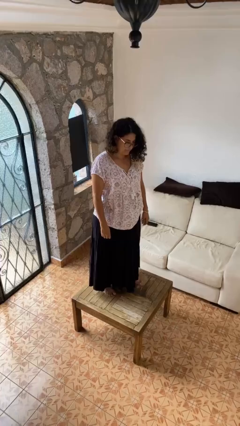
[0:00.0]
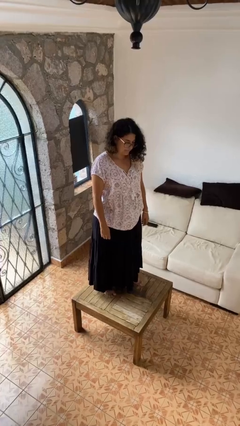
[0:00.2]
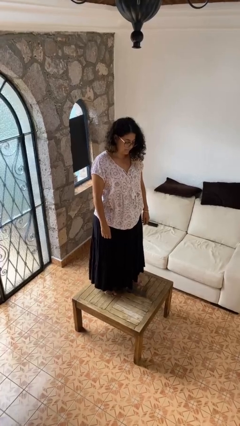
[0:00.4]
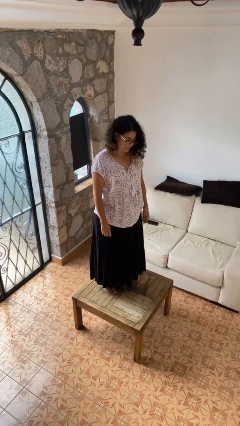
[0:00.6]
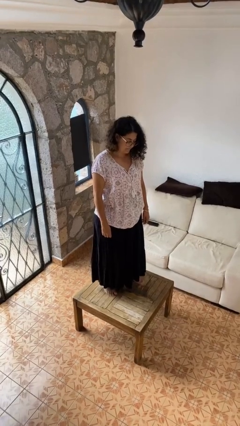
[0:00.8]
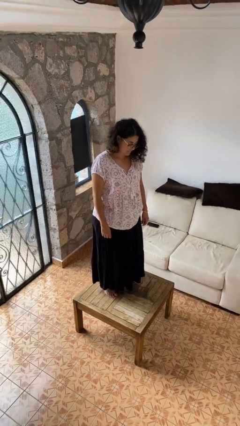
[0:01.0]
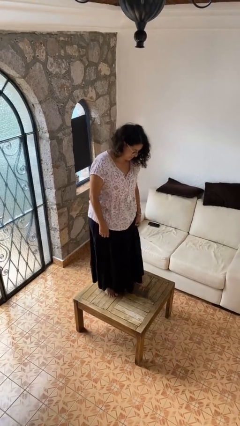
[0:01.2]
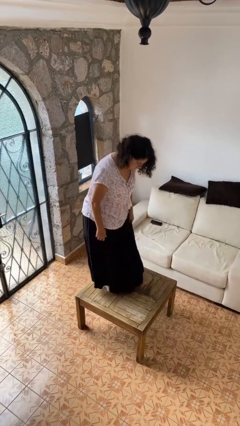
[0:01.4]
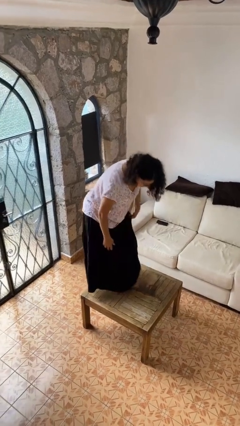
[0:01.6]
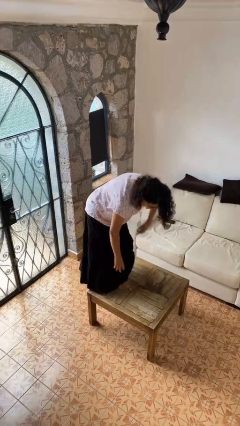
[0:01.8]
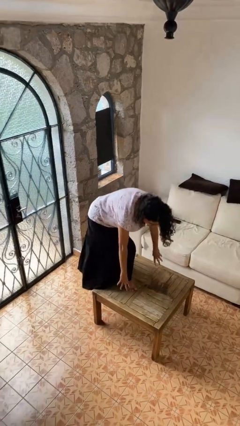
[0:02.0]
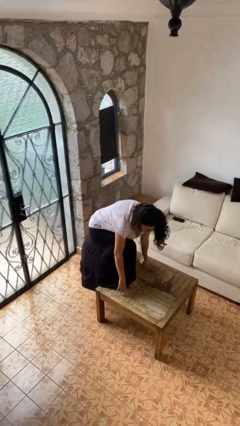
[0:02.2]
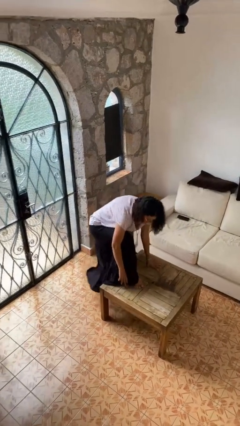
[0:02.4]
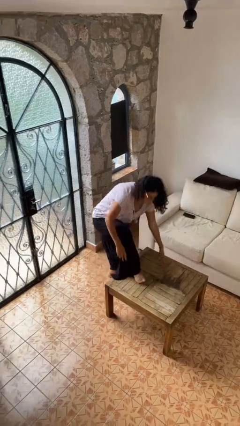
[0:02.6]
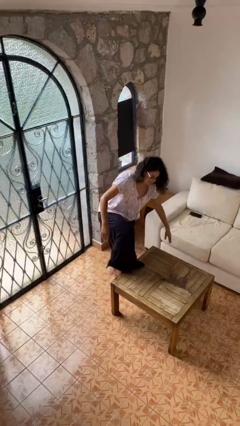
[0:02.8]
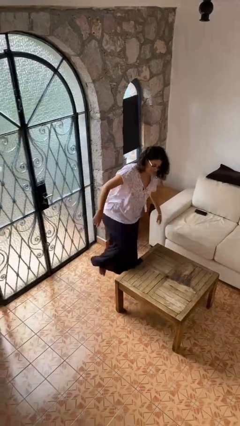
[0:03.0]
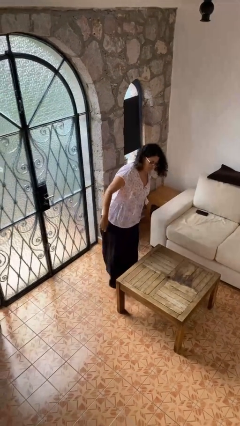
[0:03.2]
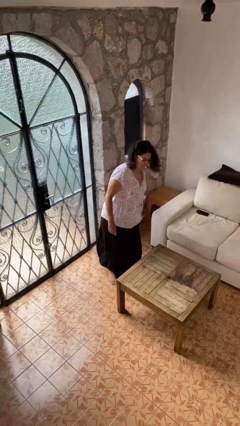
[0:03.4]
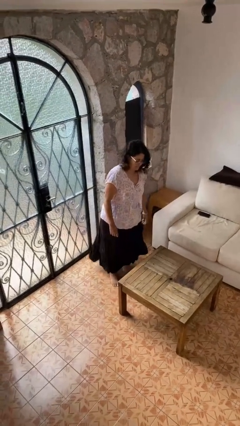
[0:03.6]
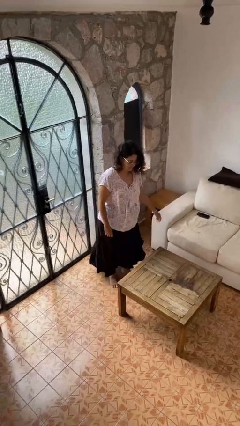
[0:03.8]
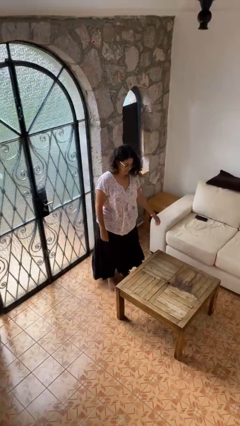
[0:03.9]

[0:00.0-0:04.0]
person climbs off table

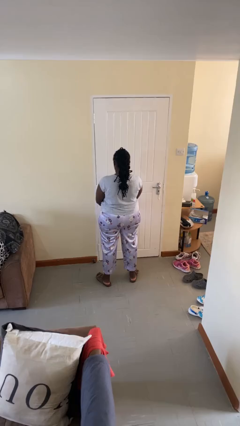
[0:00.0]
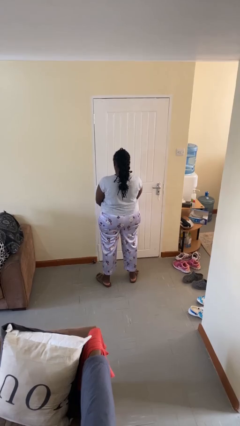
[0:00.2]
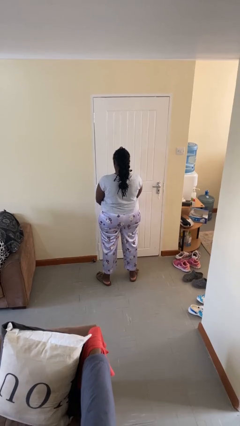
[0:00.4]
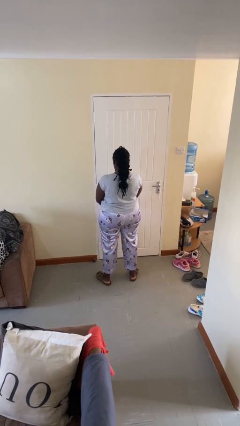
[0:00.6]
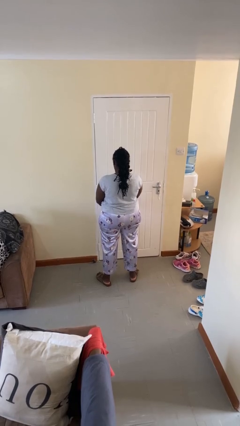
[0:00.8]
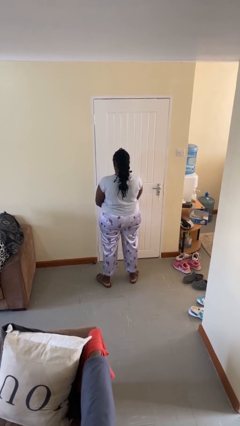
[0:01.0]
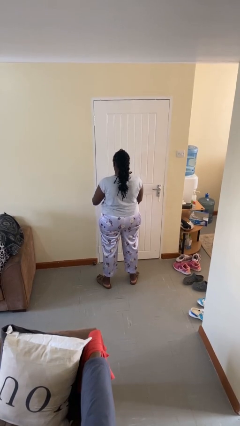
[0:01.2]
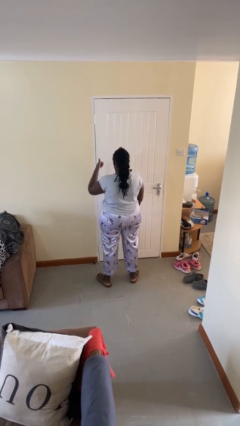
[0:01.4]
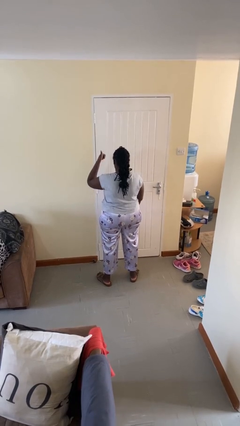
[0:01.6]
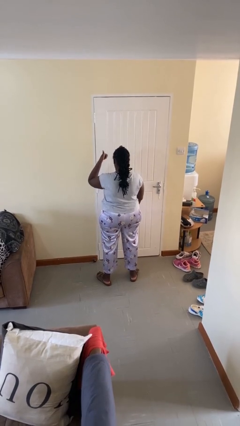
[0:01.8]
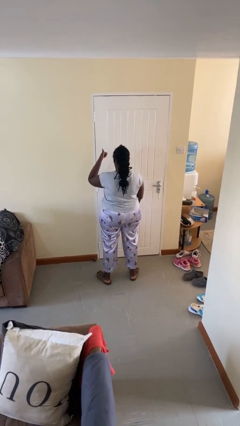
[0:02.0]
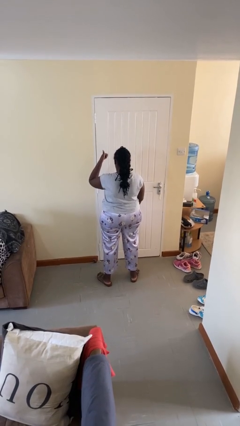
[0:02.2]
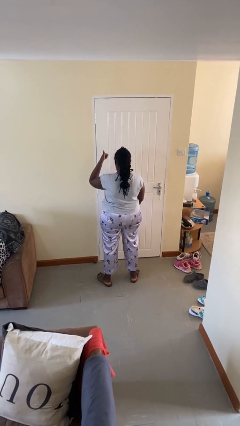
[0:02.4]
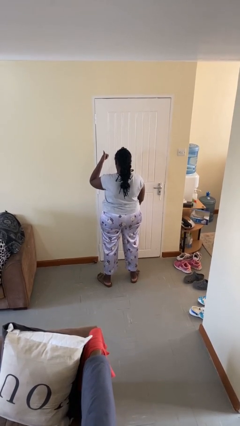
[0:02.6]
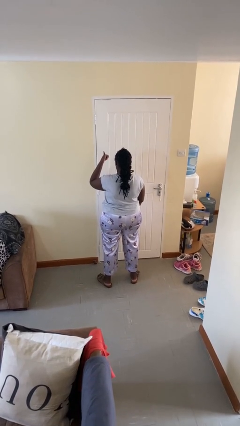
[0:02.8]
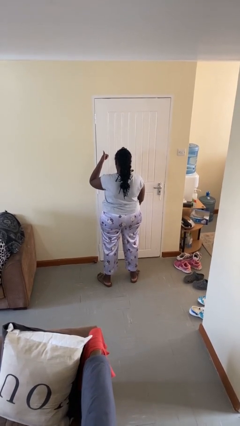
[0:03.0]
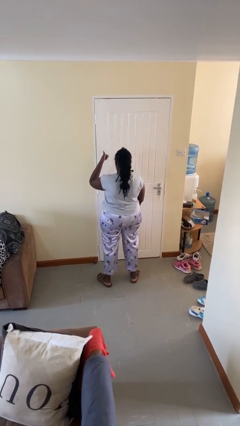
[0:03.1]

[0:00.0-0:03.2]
person gestures thumbs up

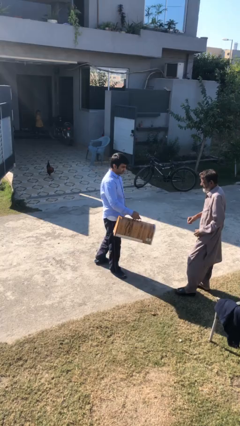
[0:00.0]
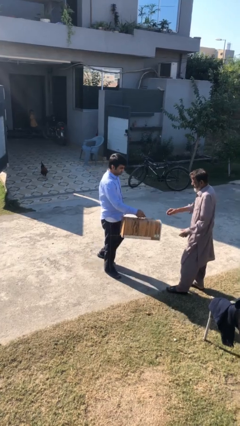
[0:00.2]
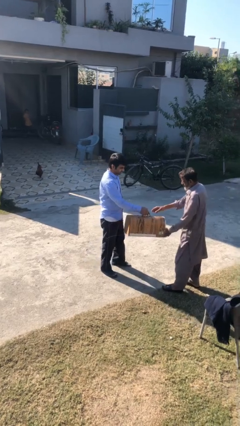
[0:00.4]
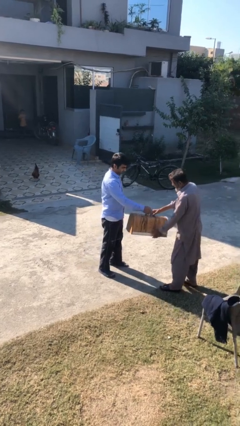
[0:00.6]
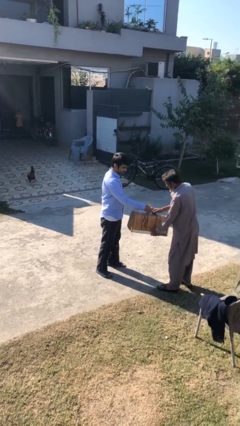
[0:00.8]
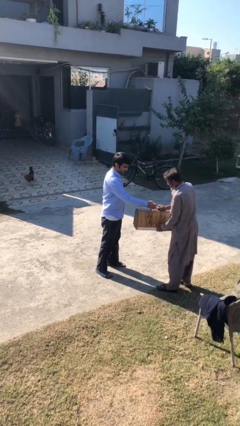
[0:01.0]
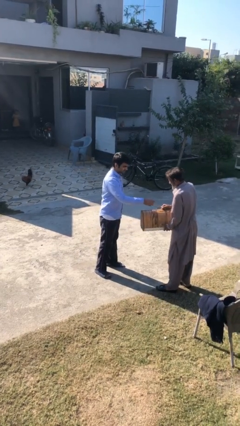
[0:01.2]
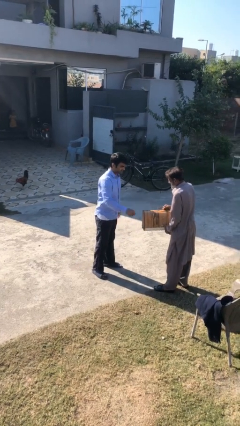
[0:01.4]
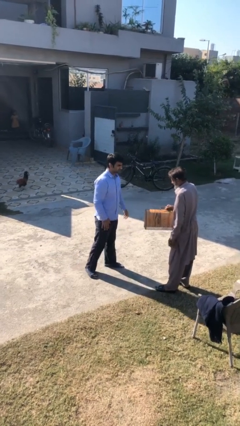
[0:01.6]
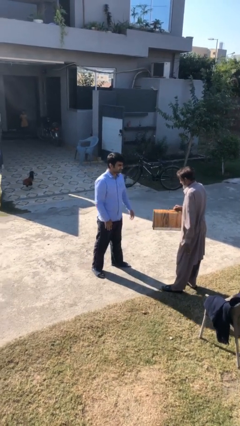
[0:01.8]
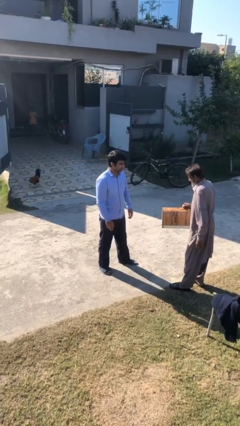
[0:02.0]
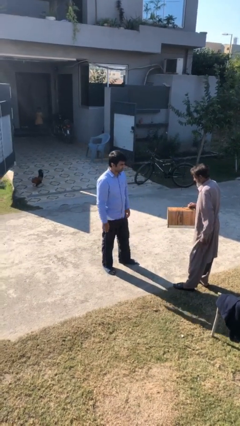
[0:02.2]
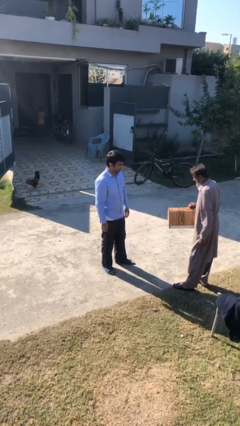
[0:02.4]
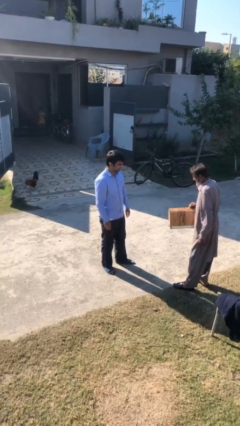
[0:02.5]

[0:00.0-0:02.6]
person transfers object to person

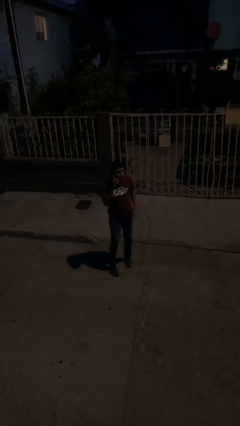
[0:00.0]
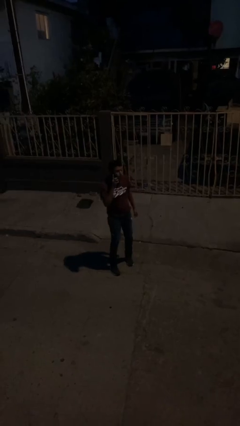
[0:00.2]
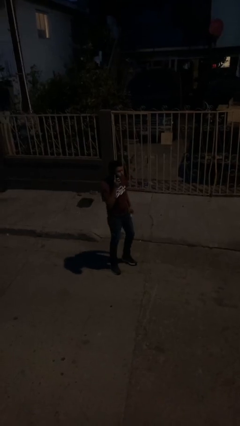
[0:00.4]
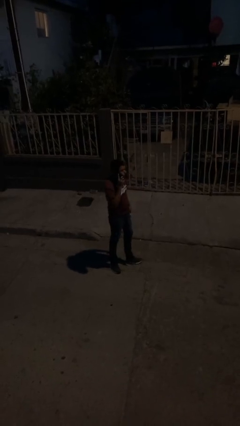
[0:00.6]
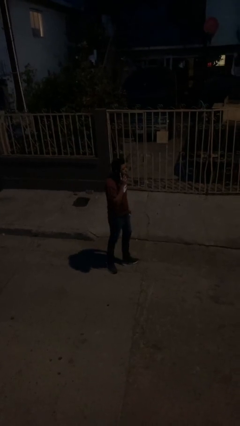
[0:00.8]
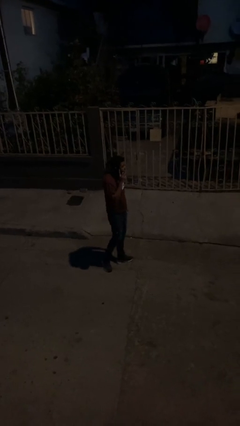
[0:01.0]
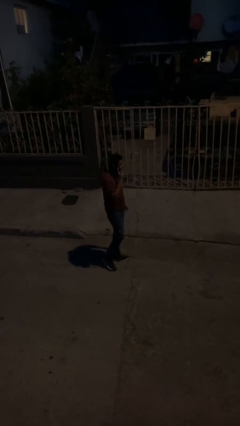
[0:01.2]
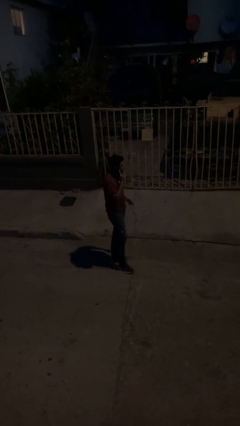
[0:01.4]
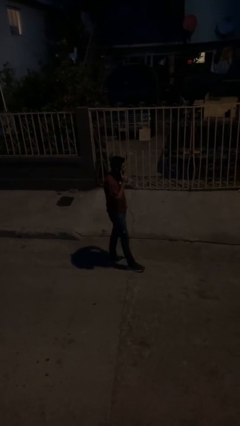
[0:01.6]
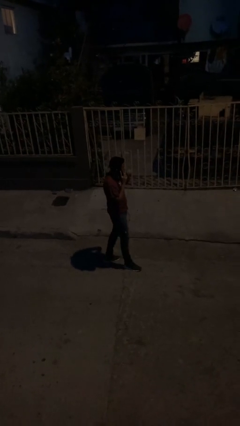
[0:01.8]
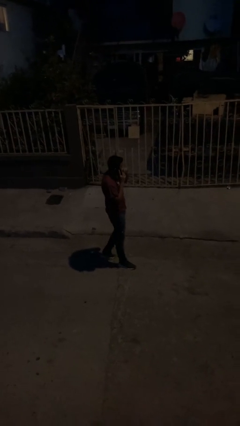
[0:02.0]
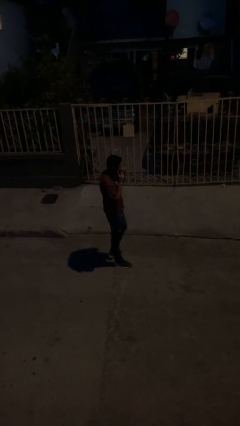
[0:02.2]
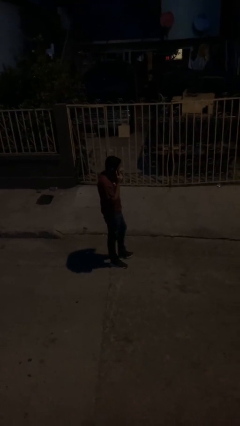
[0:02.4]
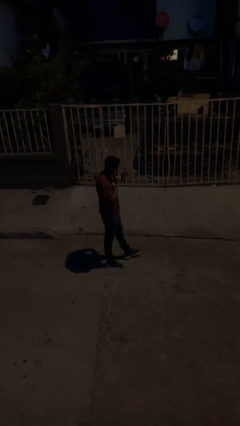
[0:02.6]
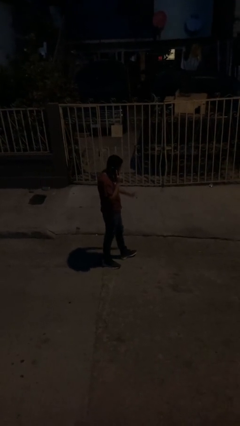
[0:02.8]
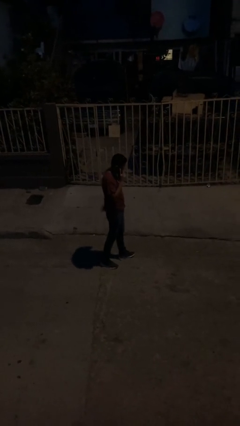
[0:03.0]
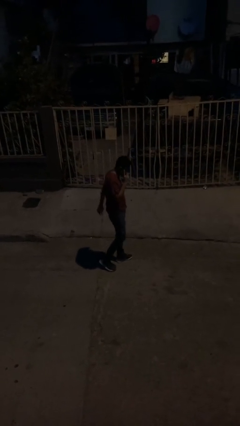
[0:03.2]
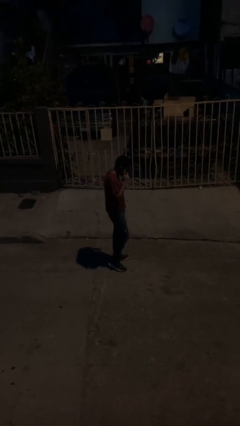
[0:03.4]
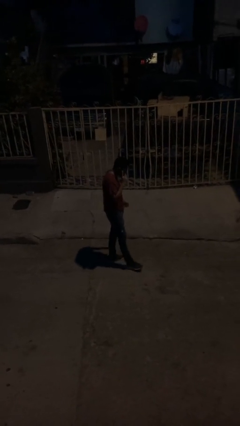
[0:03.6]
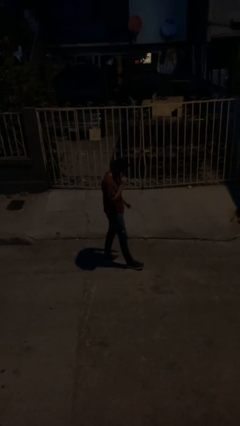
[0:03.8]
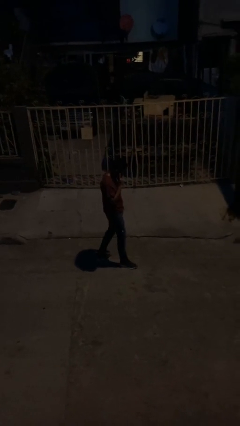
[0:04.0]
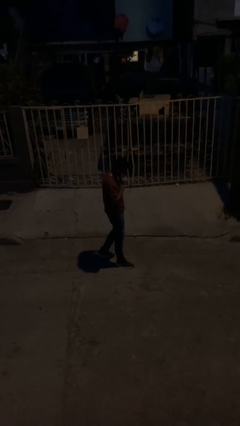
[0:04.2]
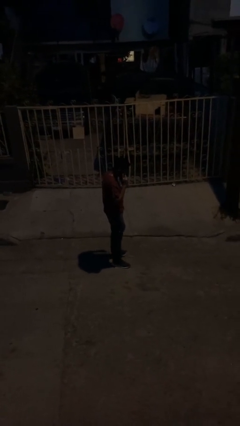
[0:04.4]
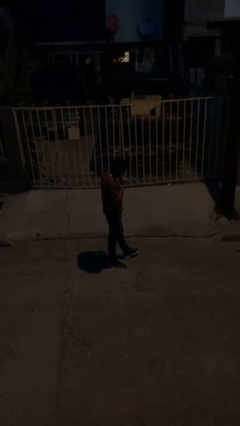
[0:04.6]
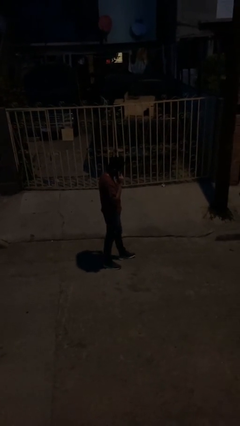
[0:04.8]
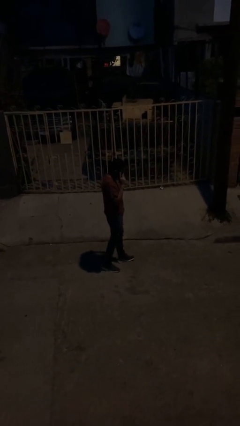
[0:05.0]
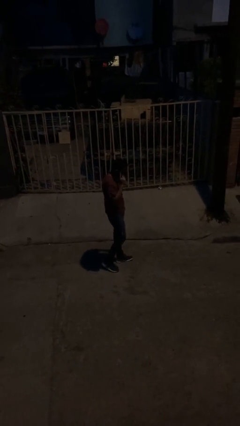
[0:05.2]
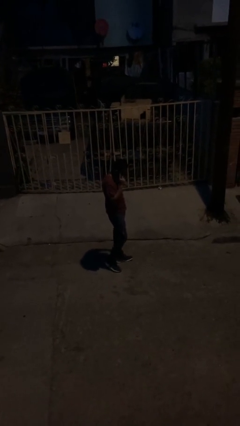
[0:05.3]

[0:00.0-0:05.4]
person talks on phone

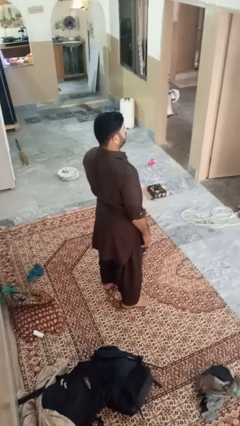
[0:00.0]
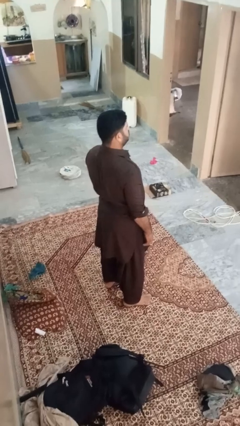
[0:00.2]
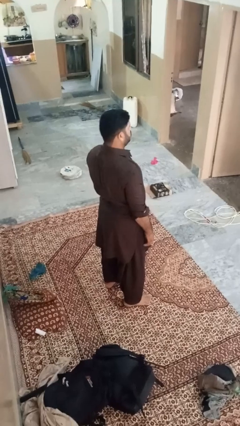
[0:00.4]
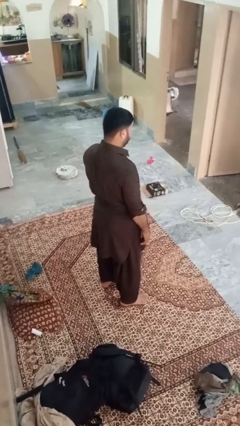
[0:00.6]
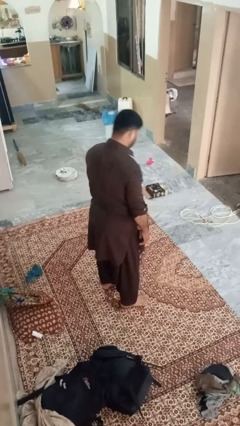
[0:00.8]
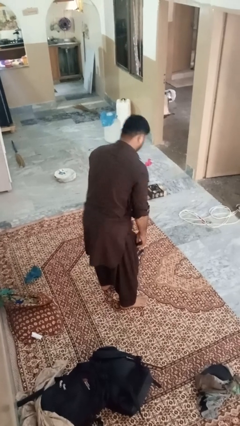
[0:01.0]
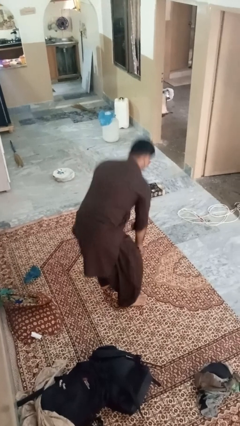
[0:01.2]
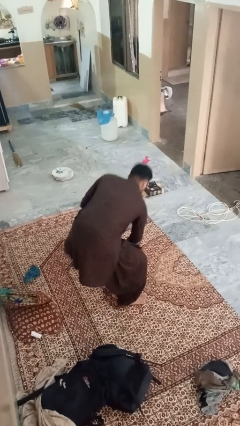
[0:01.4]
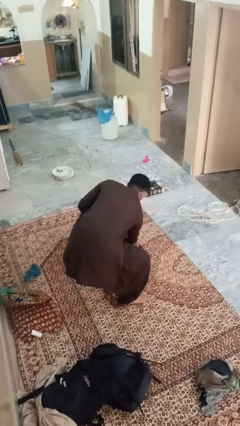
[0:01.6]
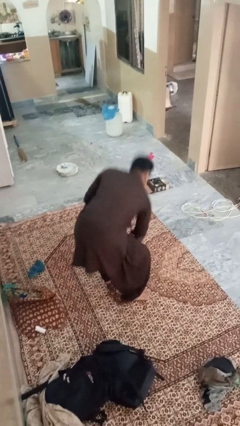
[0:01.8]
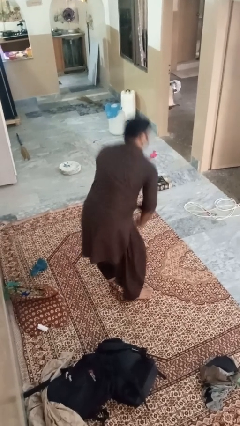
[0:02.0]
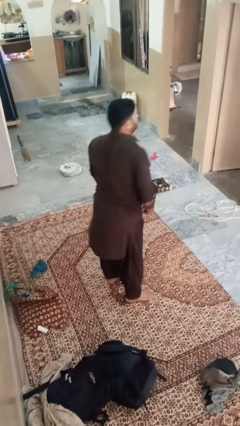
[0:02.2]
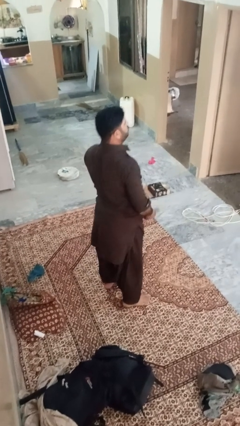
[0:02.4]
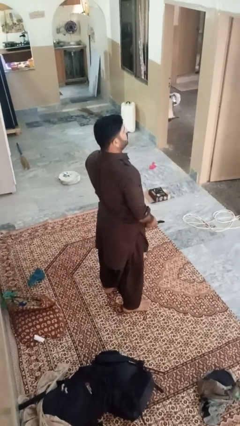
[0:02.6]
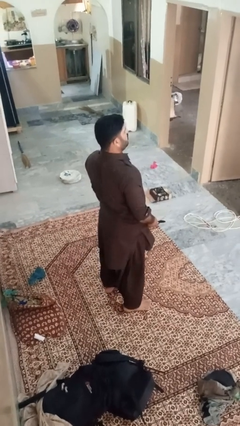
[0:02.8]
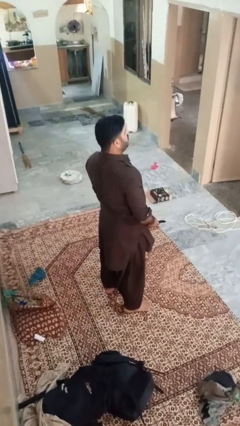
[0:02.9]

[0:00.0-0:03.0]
person picks up object from floor
